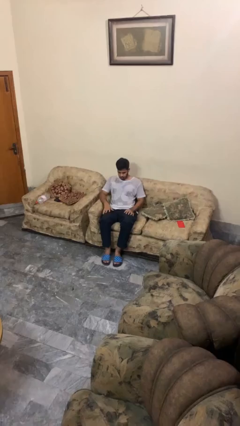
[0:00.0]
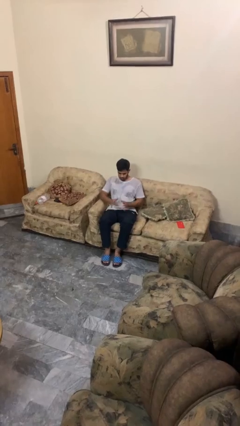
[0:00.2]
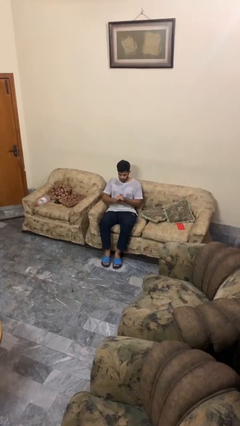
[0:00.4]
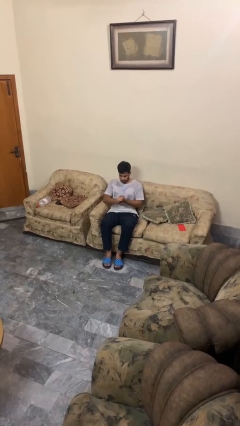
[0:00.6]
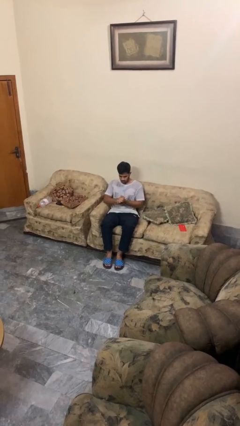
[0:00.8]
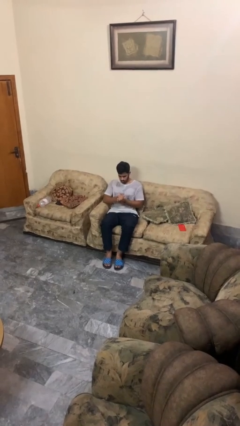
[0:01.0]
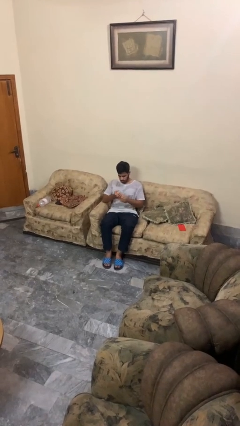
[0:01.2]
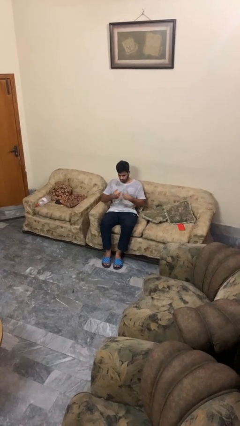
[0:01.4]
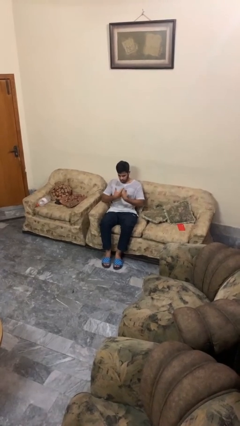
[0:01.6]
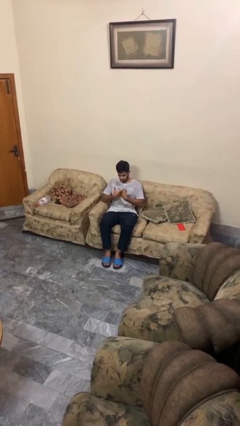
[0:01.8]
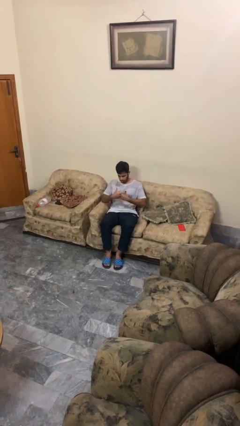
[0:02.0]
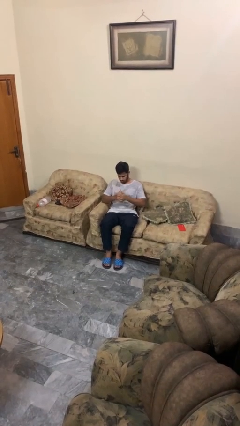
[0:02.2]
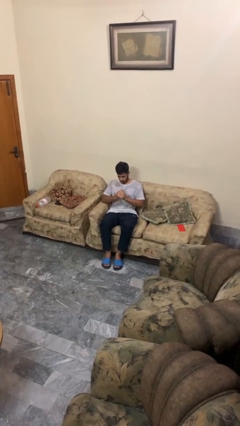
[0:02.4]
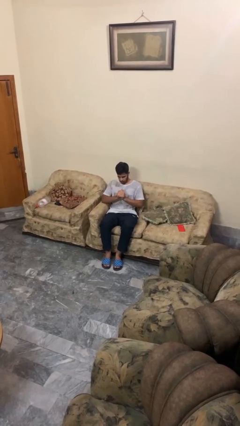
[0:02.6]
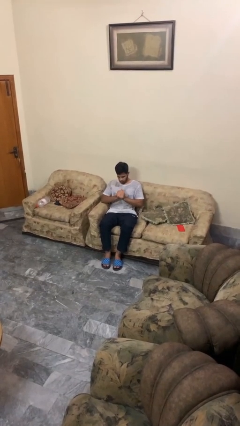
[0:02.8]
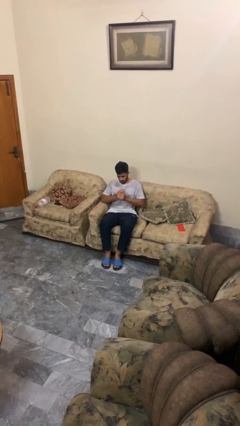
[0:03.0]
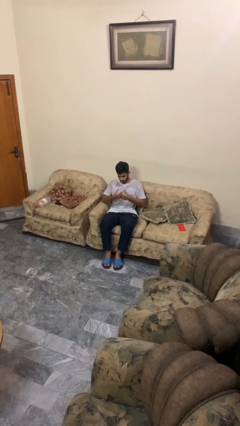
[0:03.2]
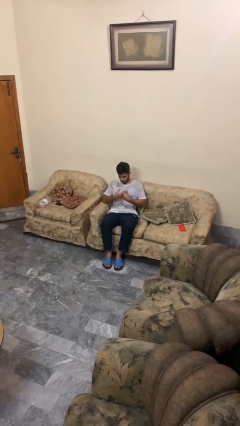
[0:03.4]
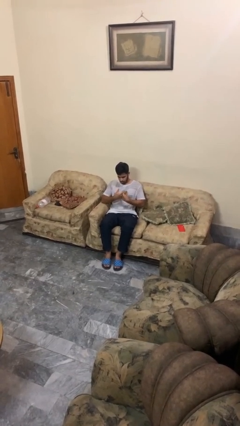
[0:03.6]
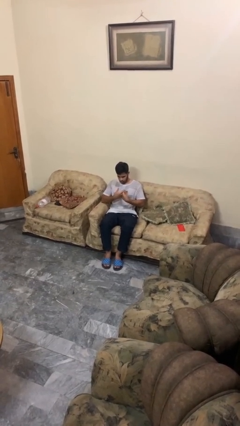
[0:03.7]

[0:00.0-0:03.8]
person cracks knuckles

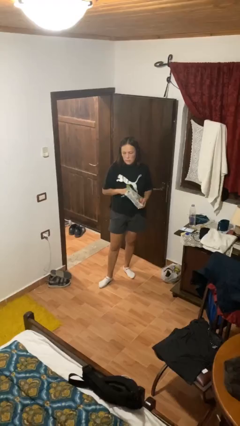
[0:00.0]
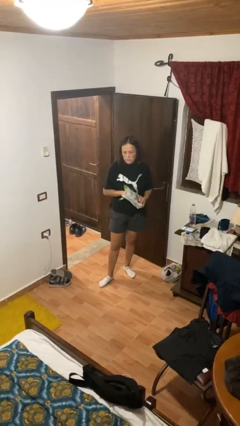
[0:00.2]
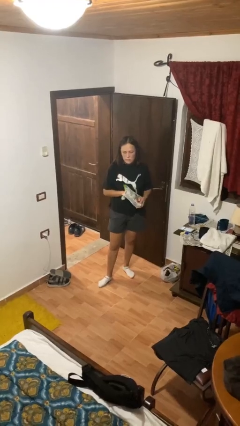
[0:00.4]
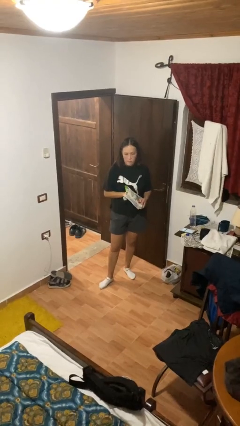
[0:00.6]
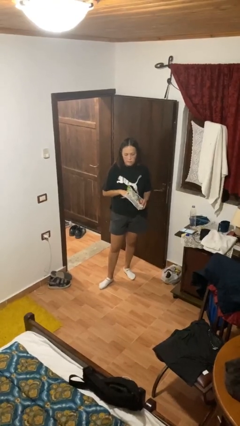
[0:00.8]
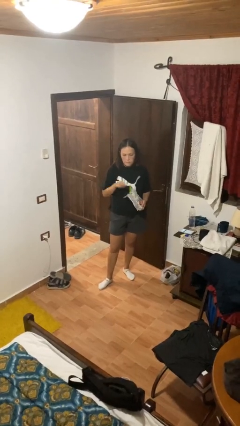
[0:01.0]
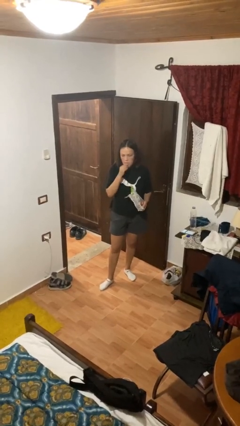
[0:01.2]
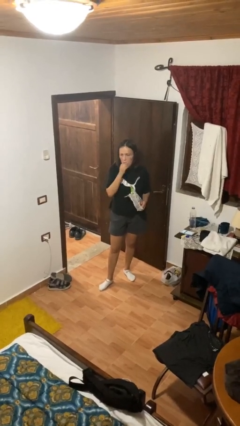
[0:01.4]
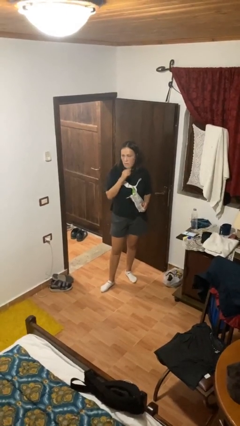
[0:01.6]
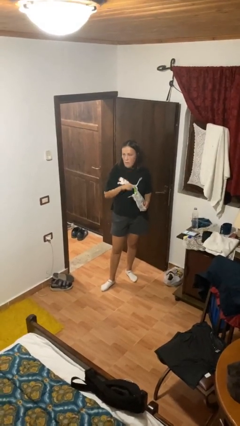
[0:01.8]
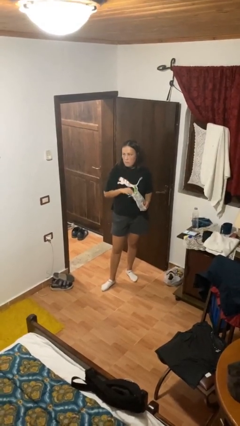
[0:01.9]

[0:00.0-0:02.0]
person eats snack from bag

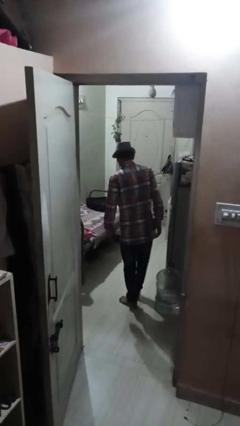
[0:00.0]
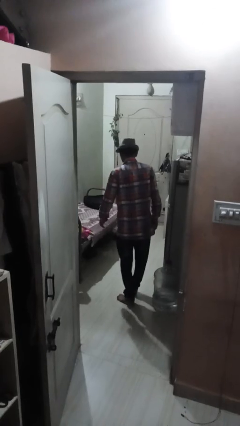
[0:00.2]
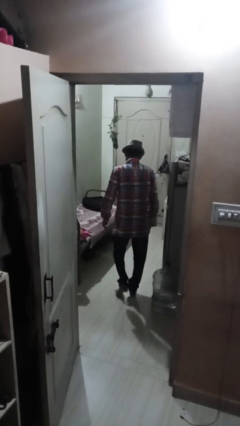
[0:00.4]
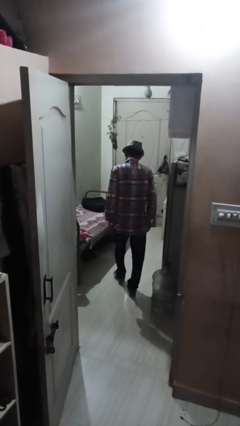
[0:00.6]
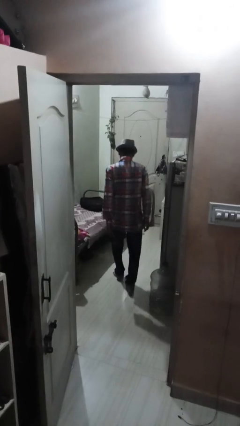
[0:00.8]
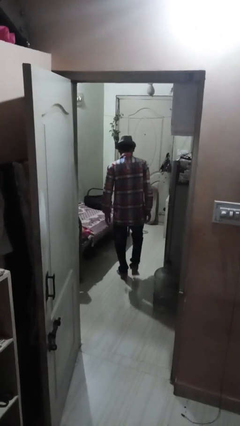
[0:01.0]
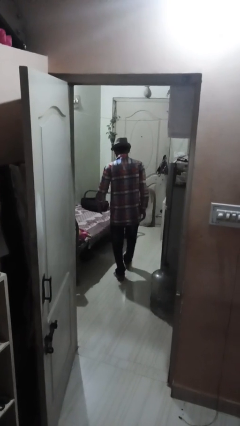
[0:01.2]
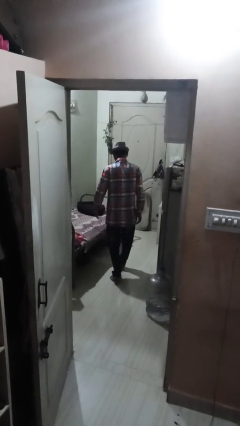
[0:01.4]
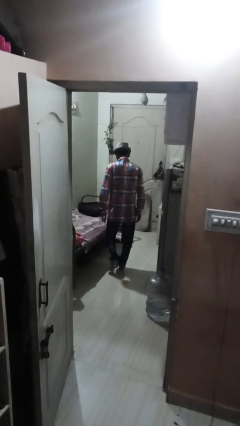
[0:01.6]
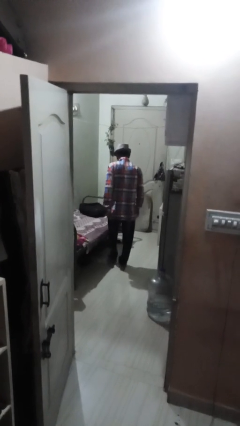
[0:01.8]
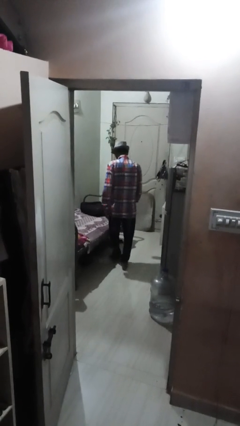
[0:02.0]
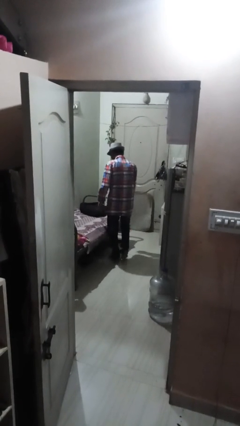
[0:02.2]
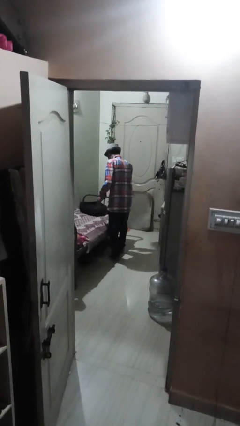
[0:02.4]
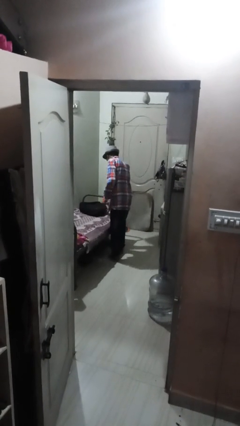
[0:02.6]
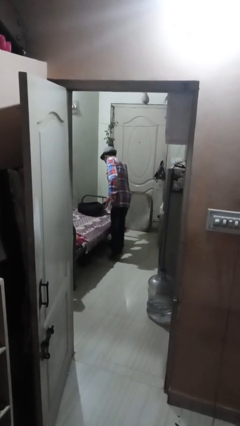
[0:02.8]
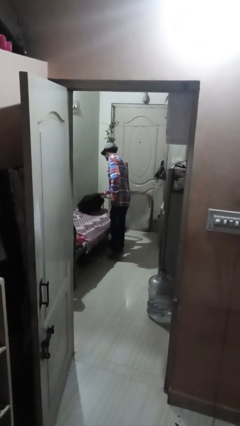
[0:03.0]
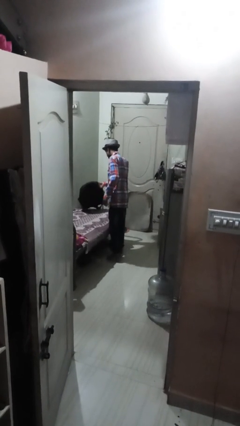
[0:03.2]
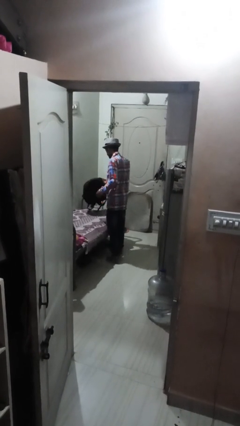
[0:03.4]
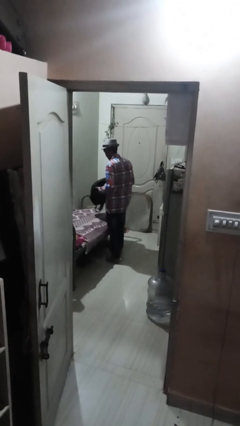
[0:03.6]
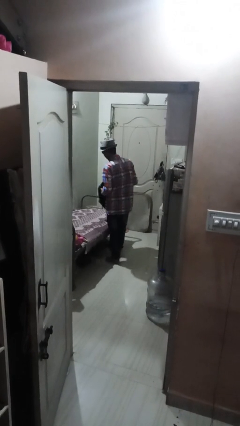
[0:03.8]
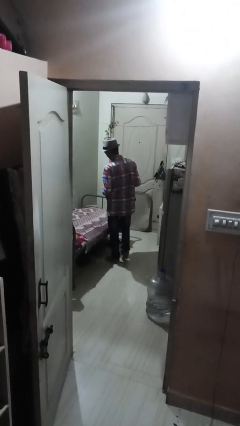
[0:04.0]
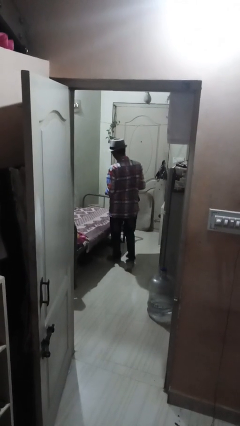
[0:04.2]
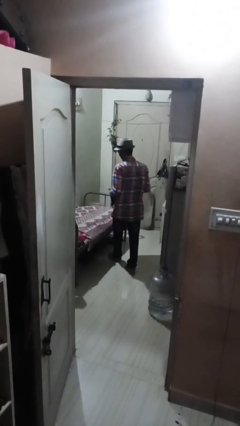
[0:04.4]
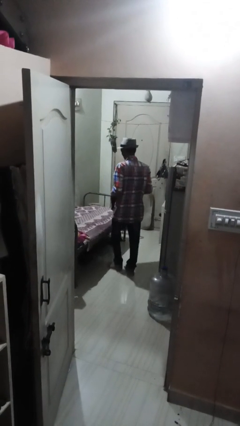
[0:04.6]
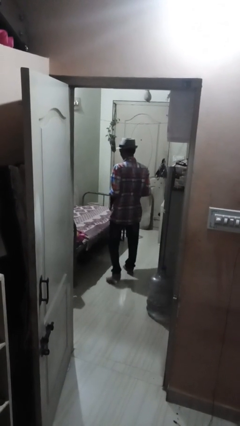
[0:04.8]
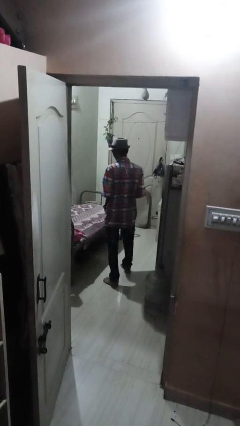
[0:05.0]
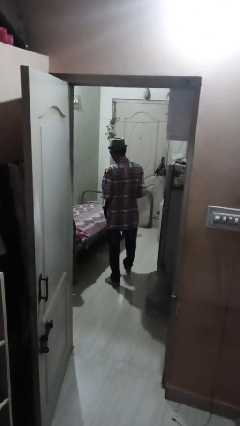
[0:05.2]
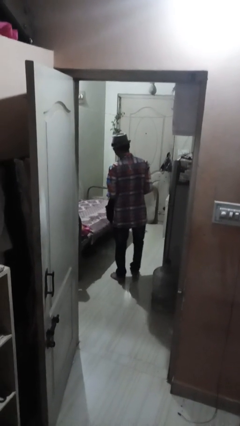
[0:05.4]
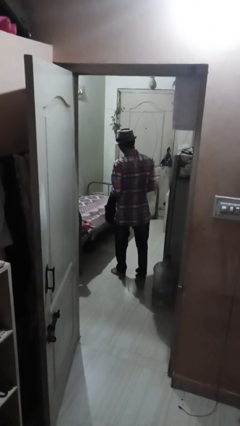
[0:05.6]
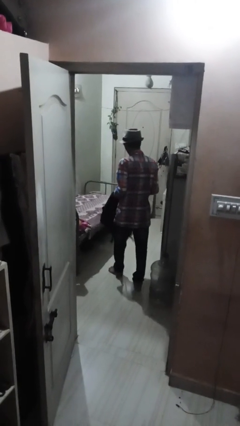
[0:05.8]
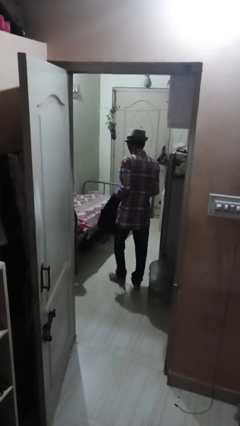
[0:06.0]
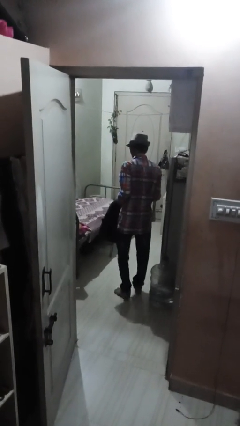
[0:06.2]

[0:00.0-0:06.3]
person picks up object from bed

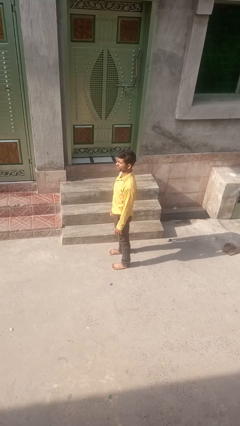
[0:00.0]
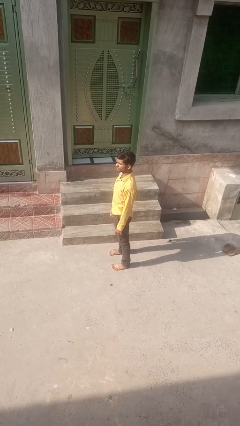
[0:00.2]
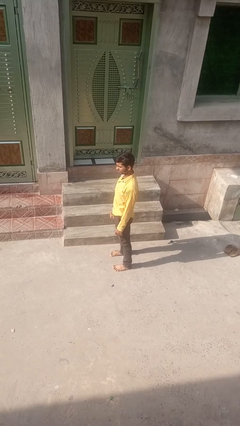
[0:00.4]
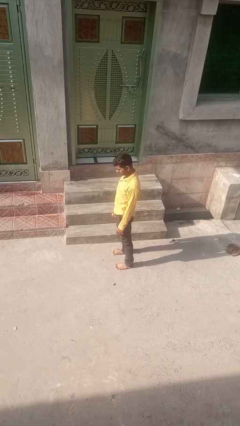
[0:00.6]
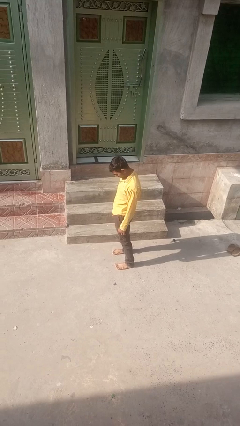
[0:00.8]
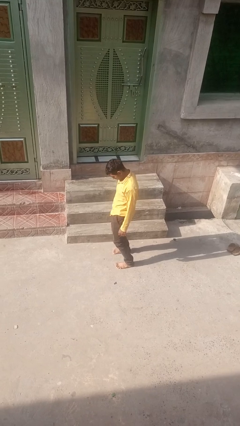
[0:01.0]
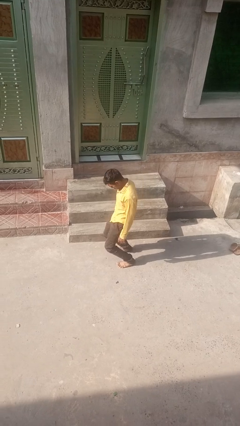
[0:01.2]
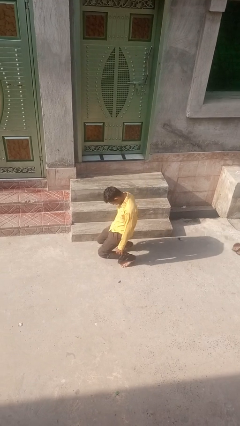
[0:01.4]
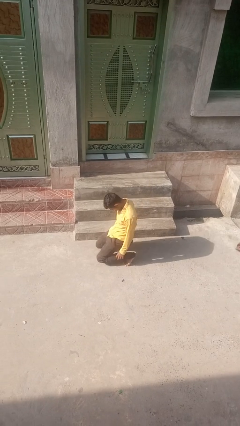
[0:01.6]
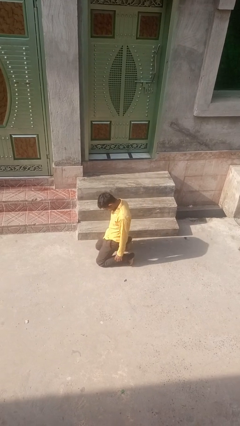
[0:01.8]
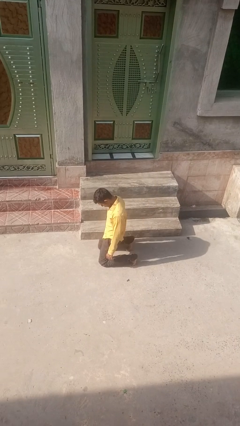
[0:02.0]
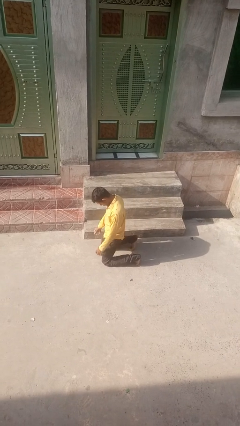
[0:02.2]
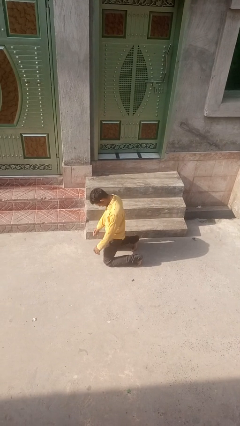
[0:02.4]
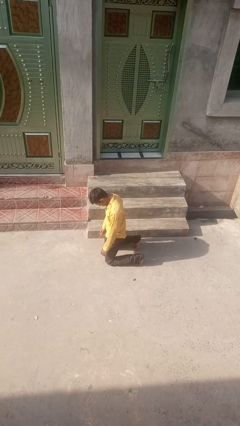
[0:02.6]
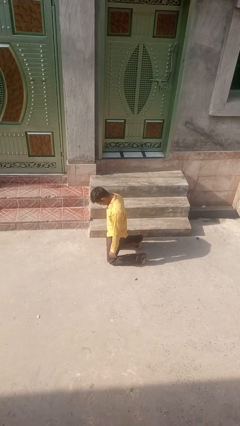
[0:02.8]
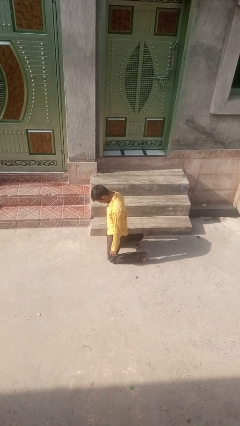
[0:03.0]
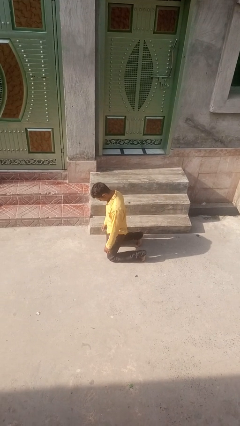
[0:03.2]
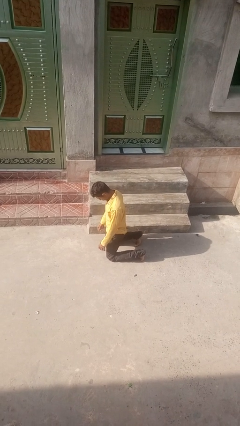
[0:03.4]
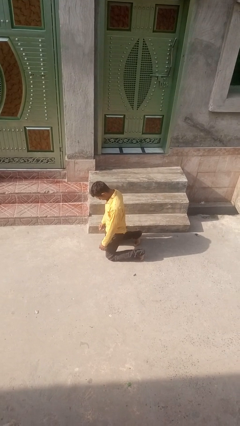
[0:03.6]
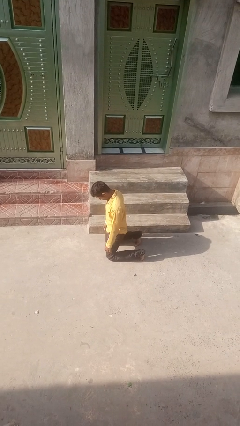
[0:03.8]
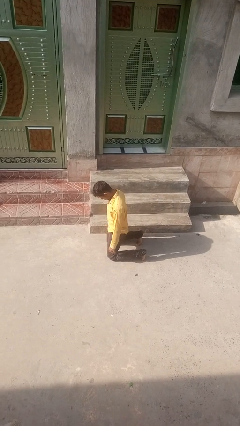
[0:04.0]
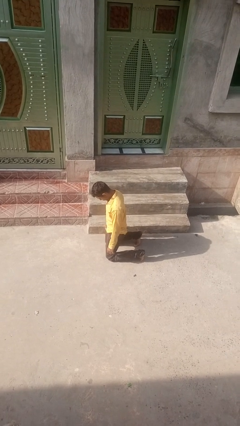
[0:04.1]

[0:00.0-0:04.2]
person kneels

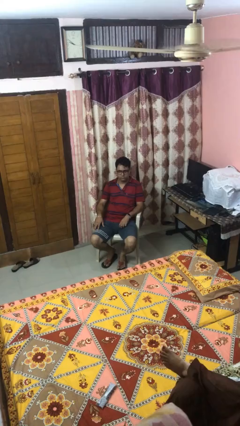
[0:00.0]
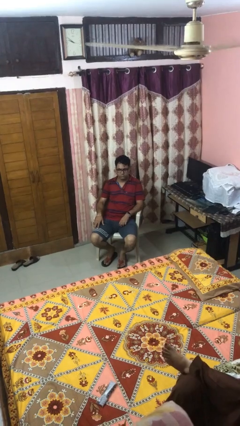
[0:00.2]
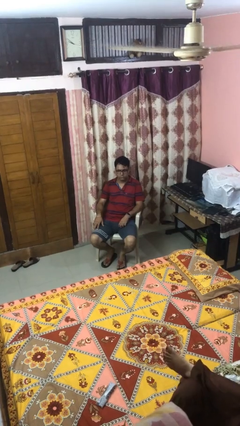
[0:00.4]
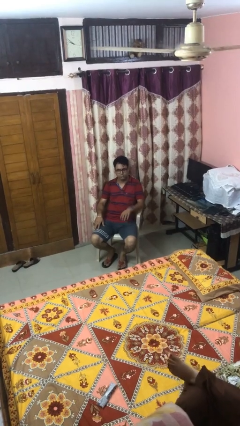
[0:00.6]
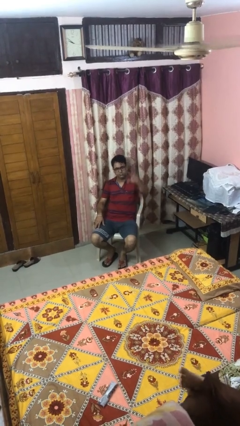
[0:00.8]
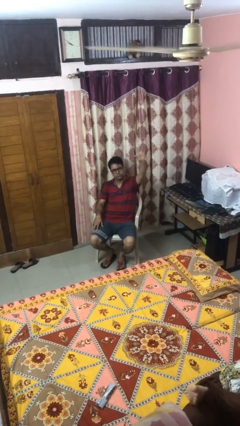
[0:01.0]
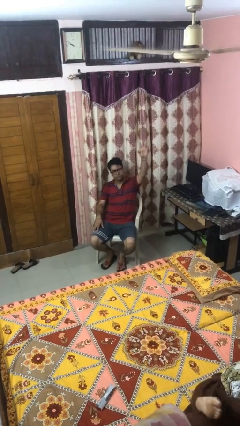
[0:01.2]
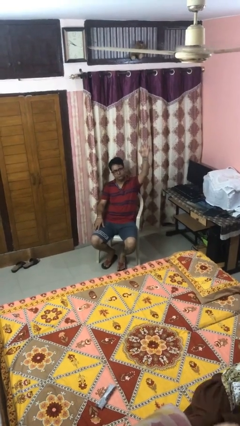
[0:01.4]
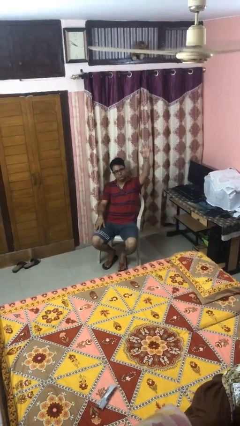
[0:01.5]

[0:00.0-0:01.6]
person gestures raise hand
